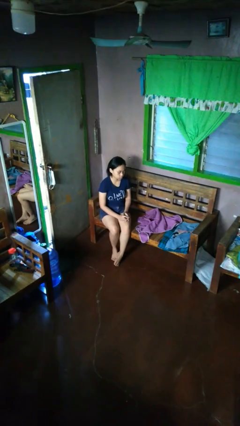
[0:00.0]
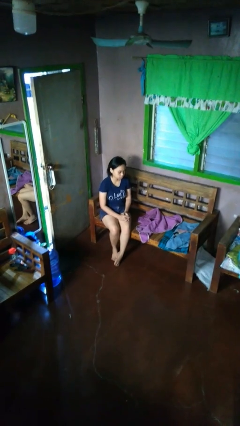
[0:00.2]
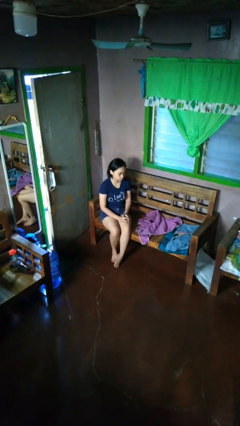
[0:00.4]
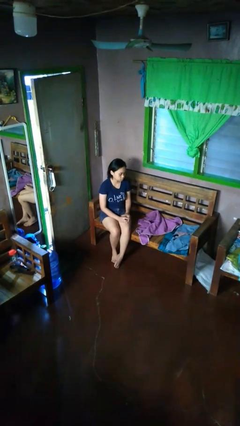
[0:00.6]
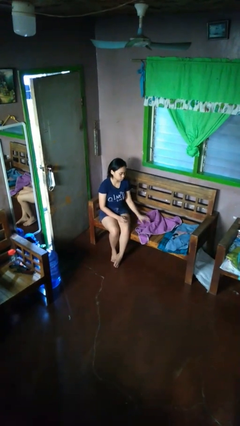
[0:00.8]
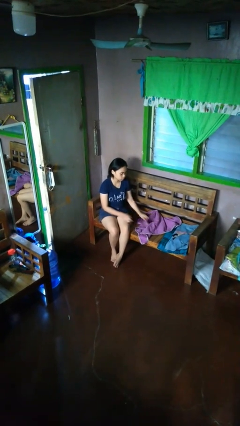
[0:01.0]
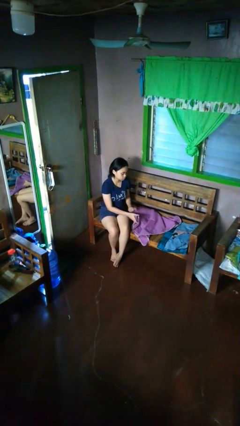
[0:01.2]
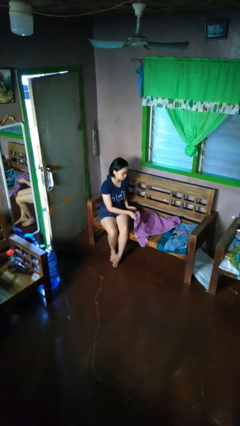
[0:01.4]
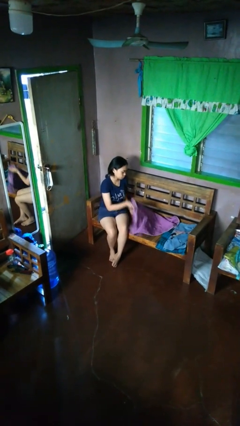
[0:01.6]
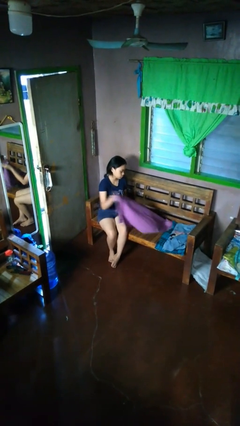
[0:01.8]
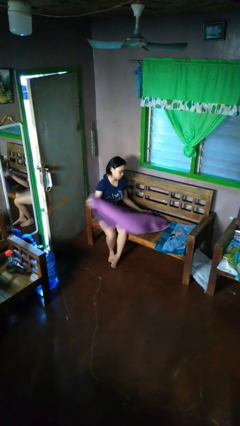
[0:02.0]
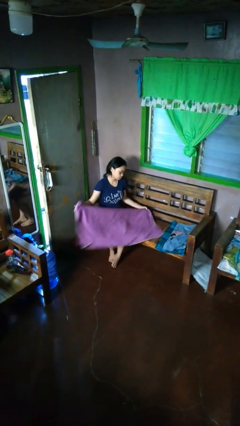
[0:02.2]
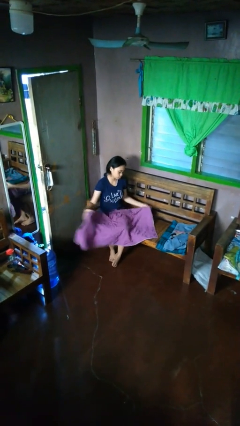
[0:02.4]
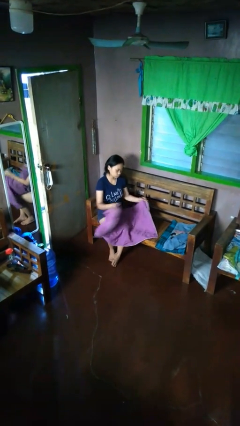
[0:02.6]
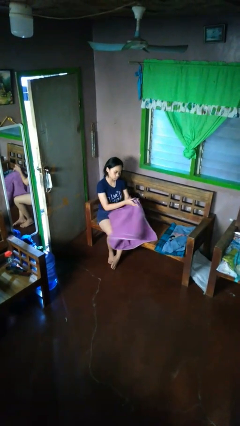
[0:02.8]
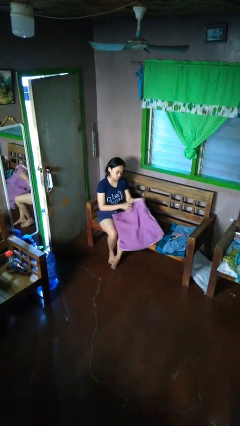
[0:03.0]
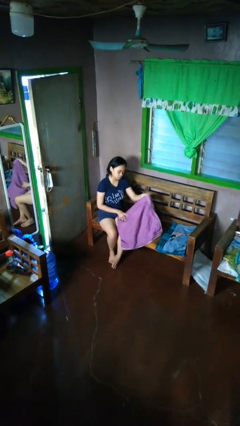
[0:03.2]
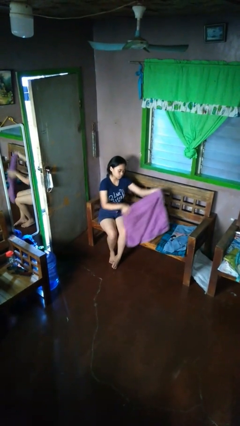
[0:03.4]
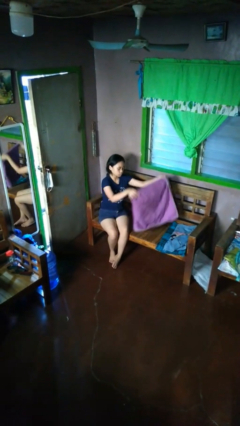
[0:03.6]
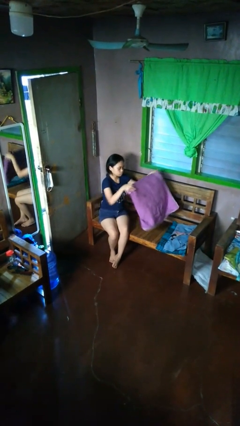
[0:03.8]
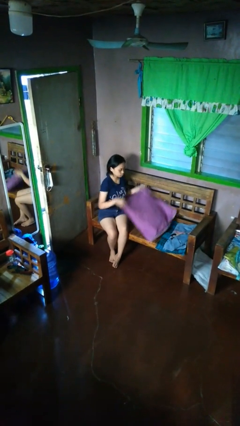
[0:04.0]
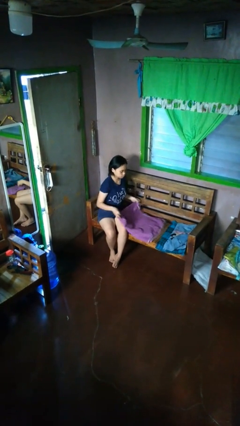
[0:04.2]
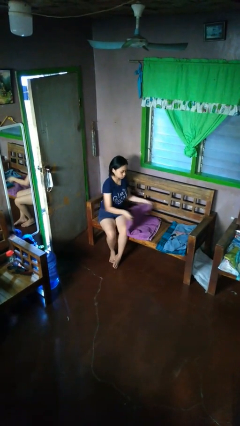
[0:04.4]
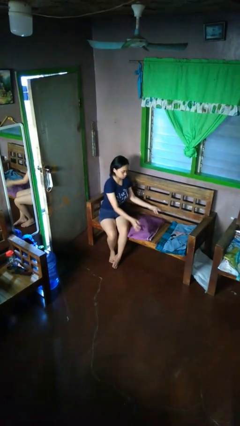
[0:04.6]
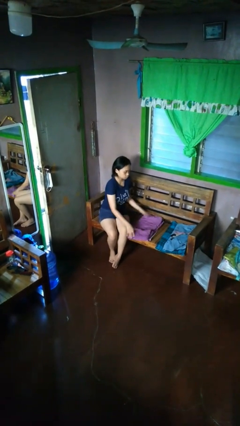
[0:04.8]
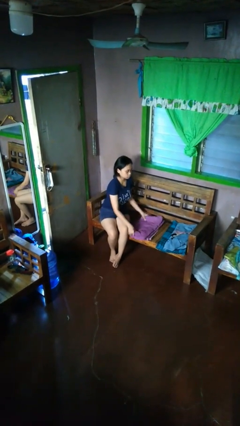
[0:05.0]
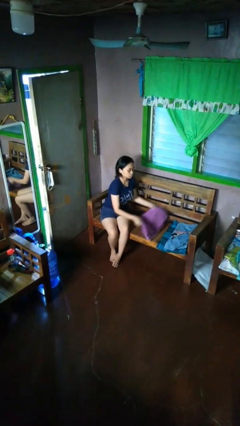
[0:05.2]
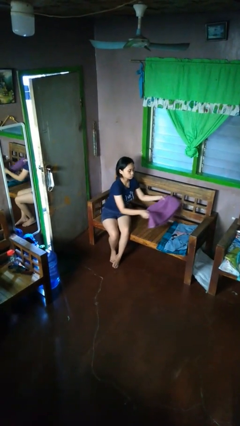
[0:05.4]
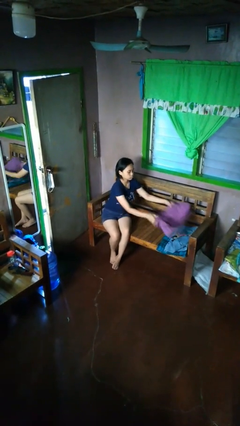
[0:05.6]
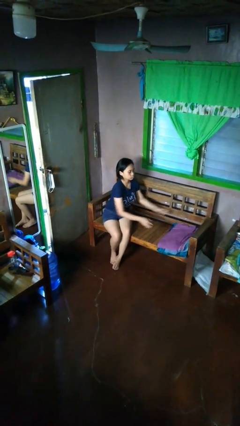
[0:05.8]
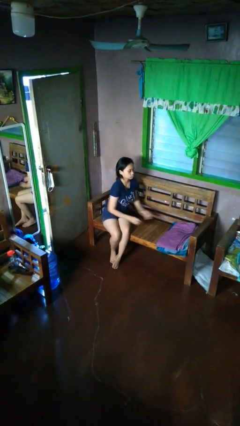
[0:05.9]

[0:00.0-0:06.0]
person folds blanket

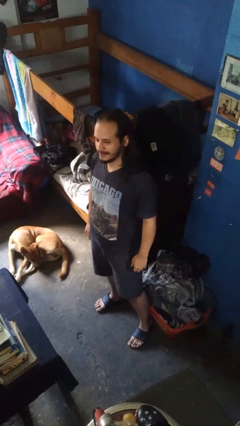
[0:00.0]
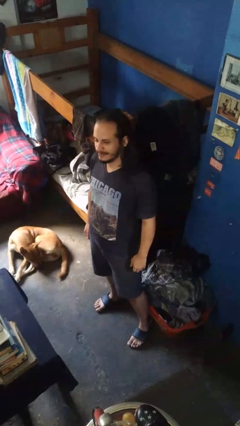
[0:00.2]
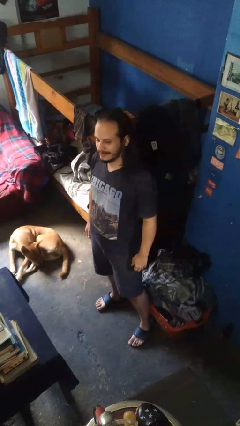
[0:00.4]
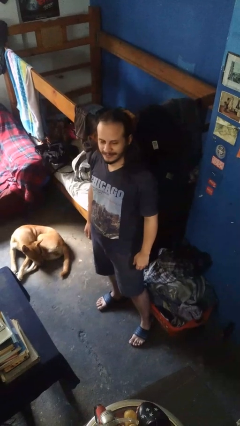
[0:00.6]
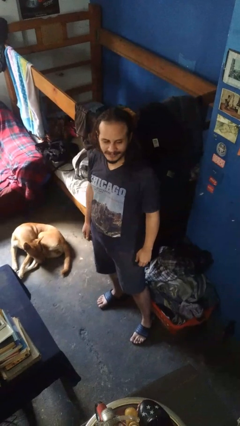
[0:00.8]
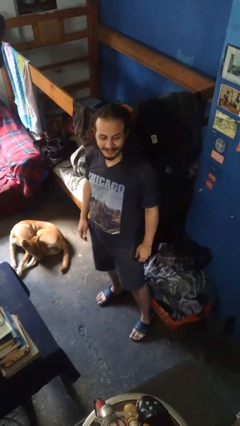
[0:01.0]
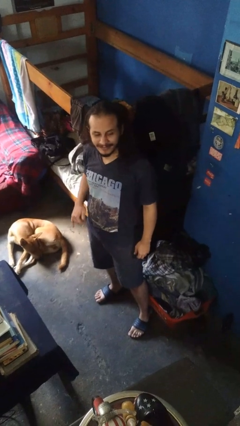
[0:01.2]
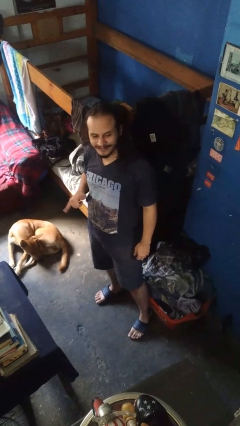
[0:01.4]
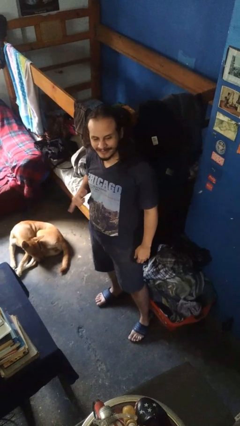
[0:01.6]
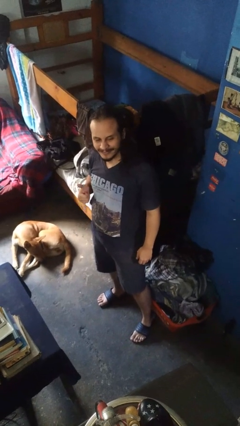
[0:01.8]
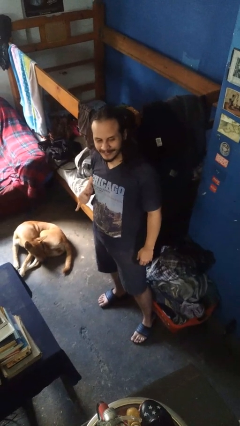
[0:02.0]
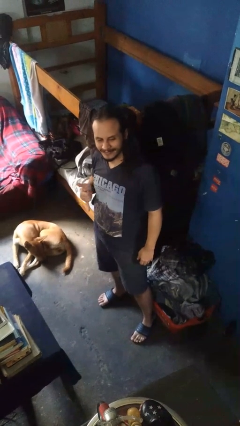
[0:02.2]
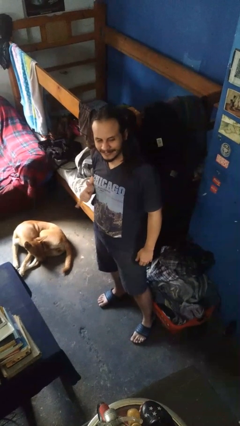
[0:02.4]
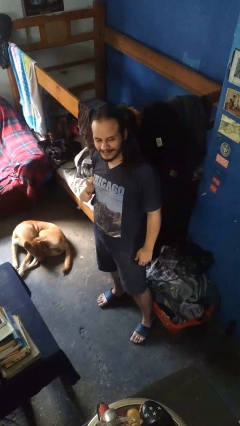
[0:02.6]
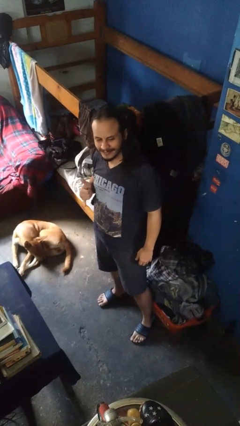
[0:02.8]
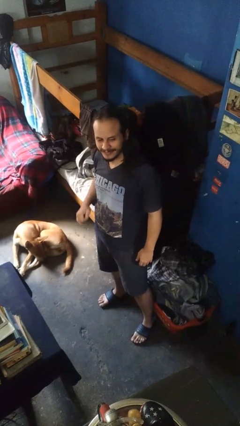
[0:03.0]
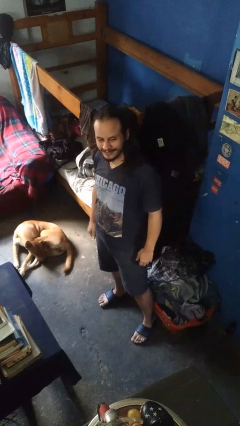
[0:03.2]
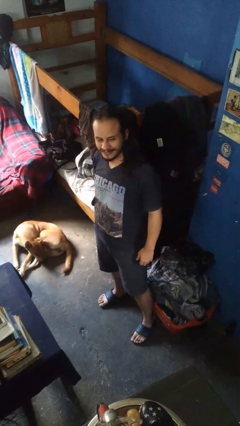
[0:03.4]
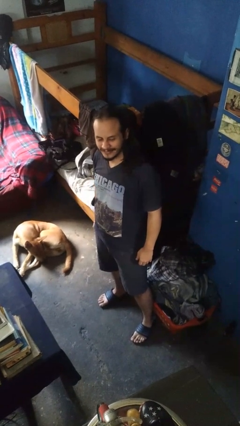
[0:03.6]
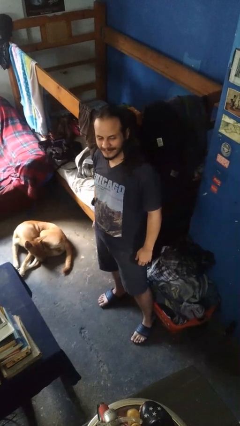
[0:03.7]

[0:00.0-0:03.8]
person gestures hang loose

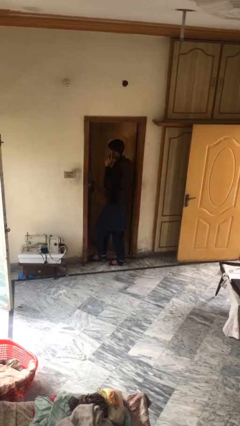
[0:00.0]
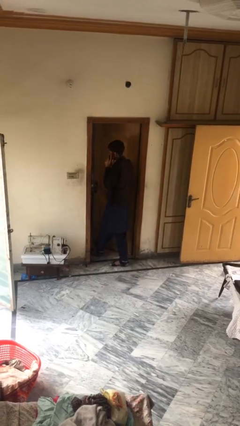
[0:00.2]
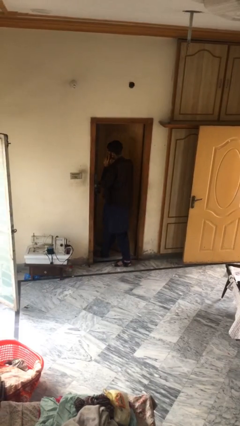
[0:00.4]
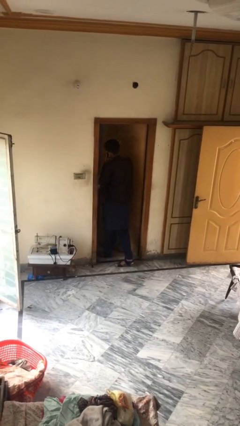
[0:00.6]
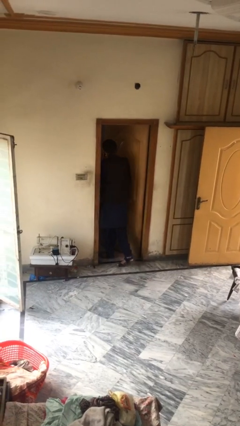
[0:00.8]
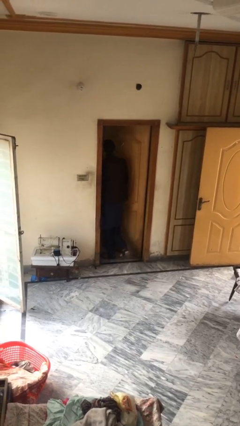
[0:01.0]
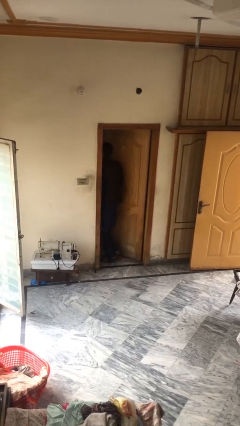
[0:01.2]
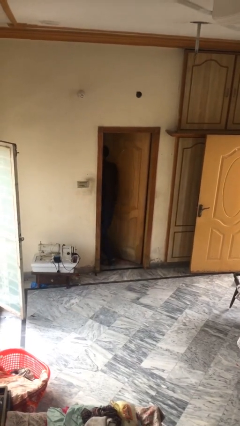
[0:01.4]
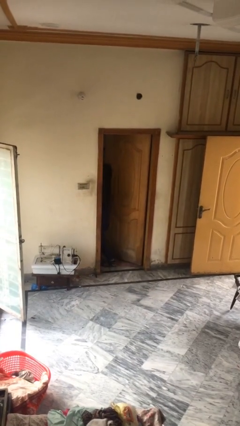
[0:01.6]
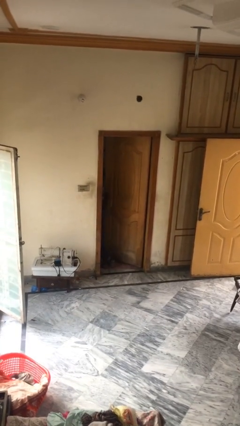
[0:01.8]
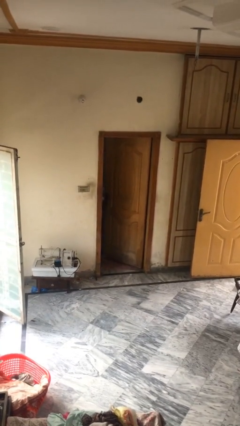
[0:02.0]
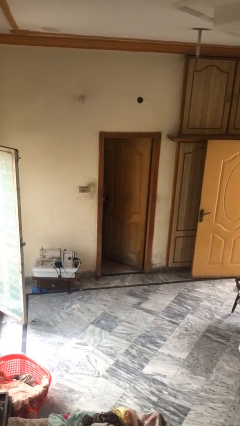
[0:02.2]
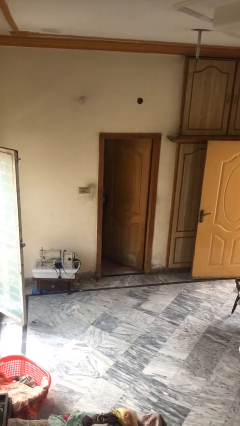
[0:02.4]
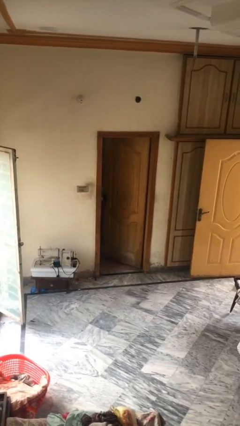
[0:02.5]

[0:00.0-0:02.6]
person exits scene through structure

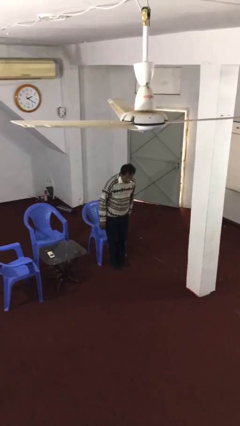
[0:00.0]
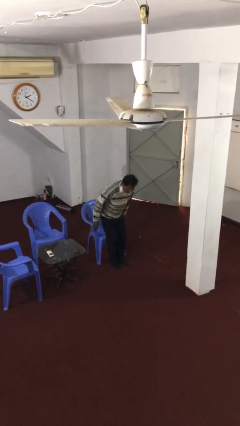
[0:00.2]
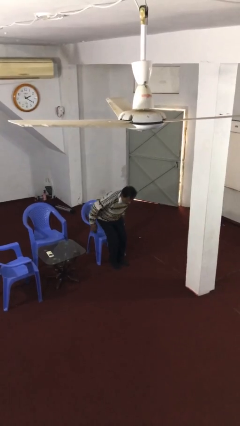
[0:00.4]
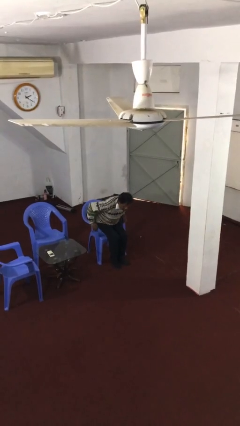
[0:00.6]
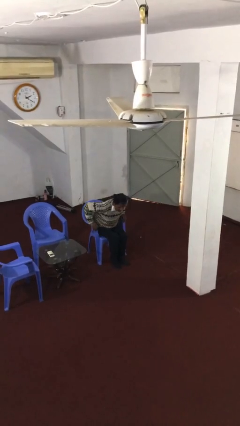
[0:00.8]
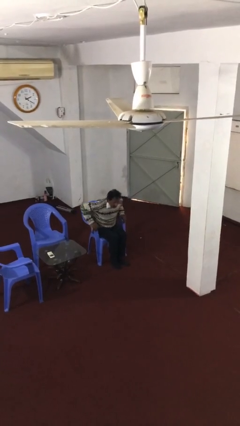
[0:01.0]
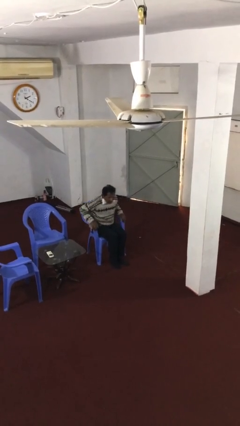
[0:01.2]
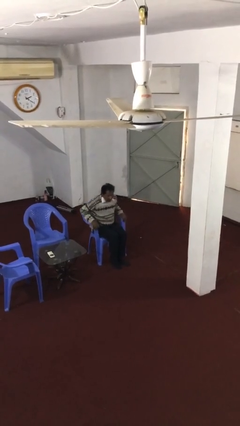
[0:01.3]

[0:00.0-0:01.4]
person sits down

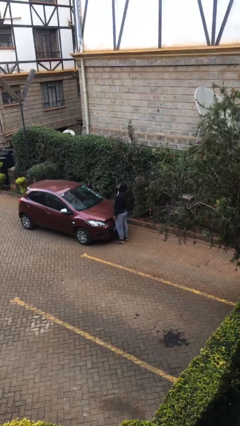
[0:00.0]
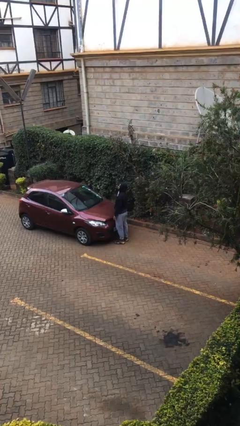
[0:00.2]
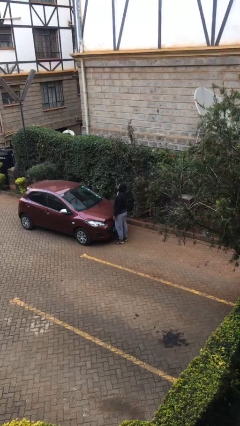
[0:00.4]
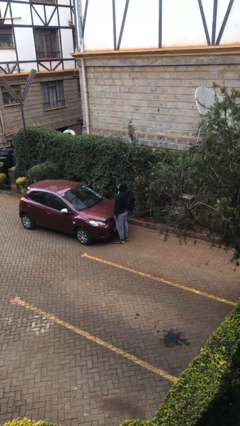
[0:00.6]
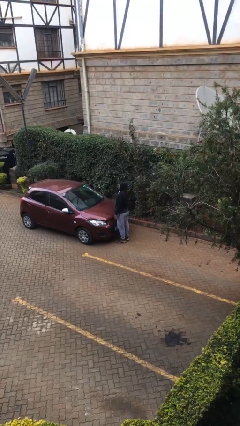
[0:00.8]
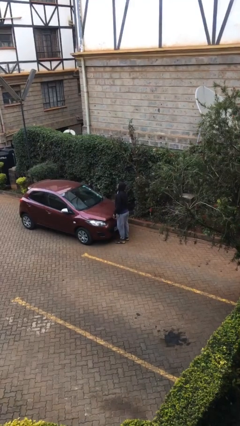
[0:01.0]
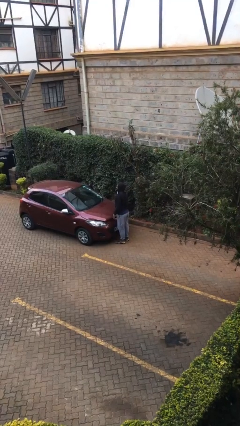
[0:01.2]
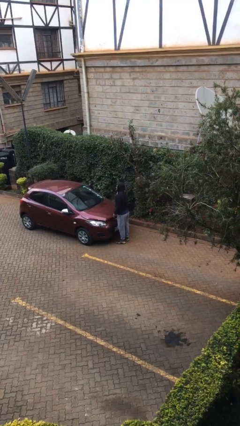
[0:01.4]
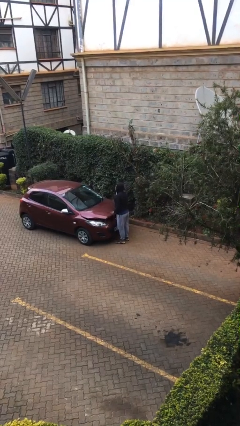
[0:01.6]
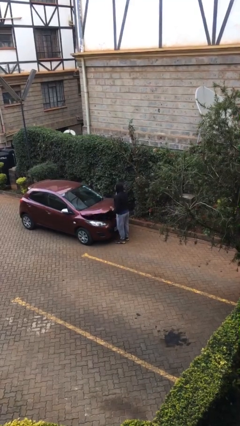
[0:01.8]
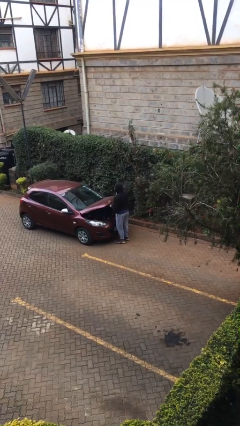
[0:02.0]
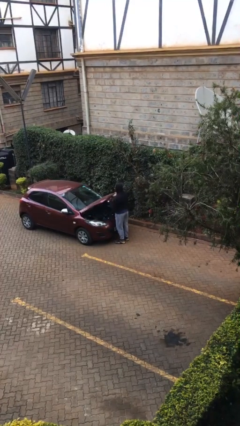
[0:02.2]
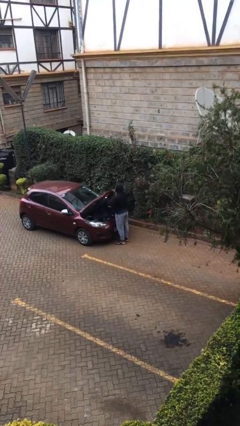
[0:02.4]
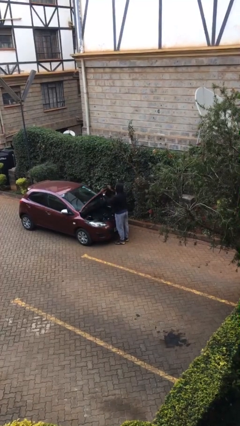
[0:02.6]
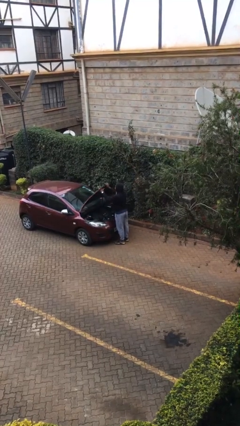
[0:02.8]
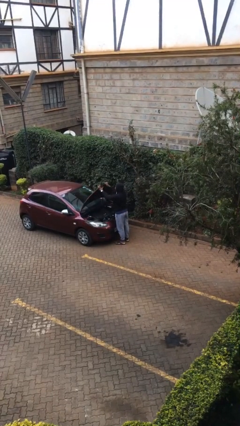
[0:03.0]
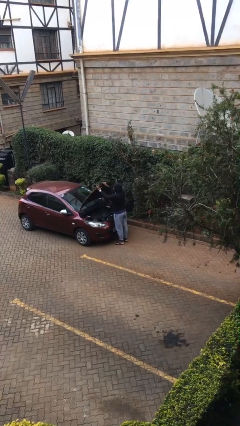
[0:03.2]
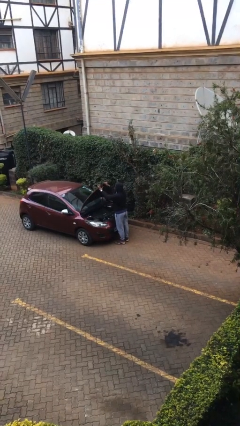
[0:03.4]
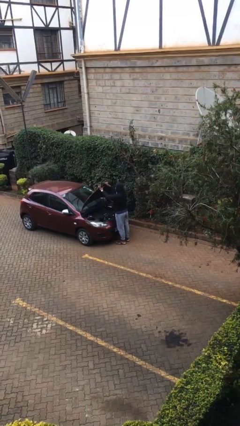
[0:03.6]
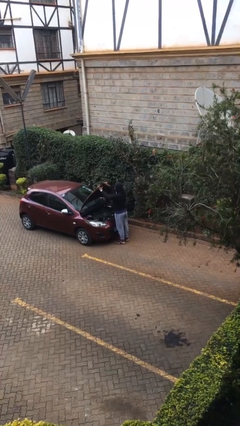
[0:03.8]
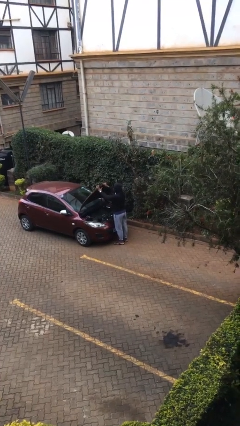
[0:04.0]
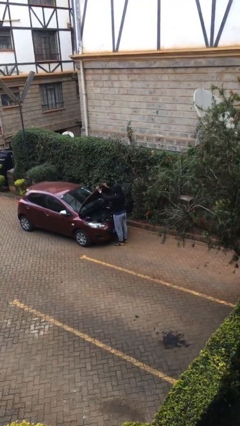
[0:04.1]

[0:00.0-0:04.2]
person opens car hood
